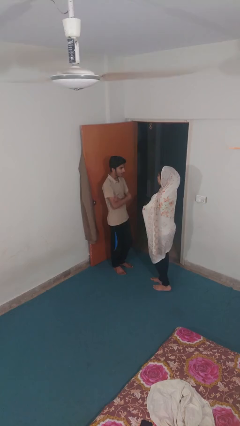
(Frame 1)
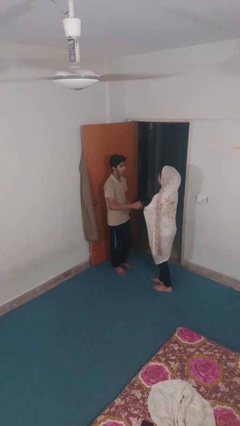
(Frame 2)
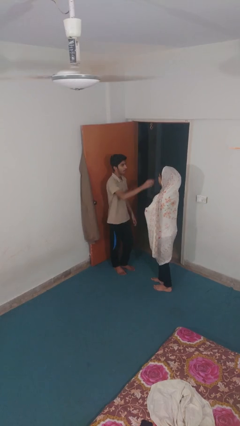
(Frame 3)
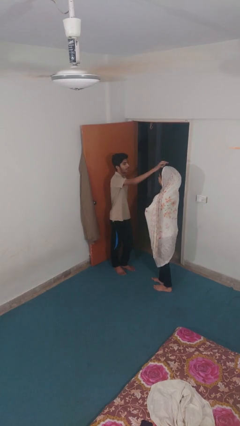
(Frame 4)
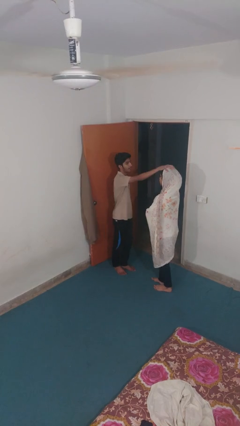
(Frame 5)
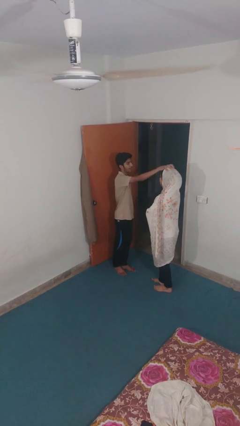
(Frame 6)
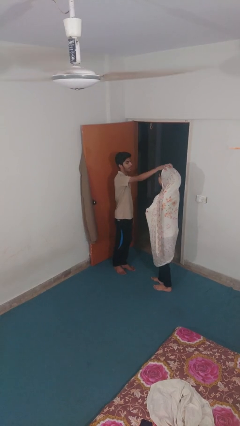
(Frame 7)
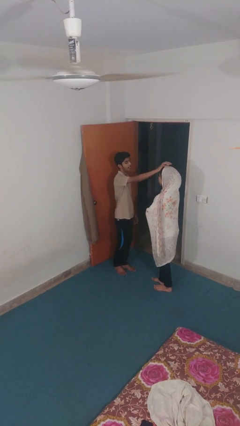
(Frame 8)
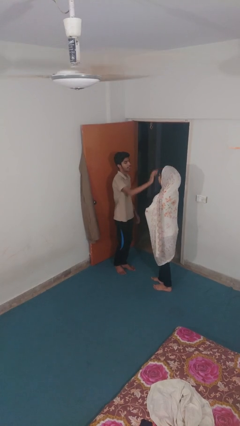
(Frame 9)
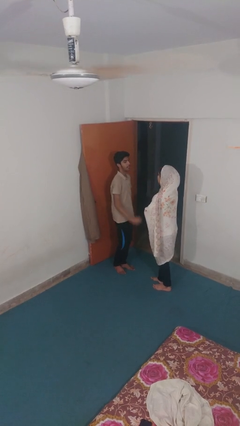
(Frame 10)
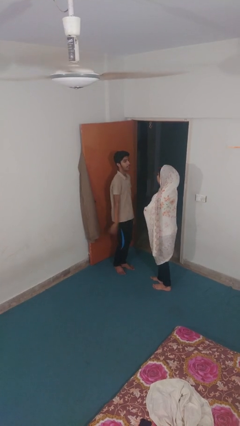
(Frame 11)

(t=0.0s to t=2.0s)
person grabs person by hair

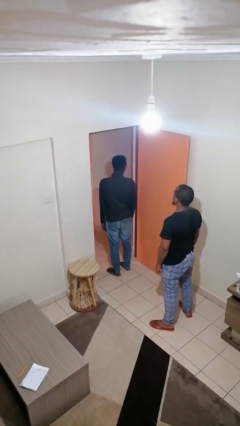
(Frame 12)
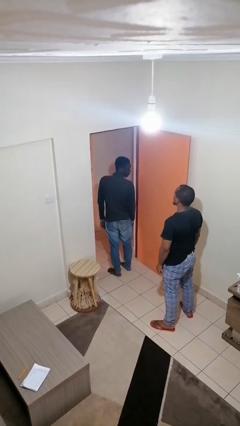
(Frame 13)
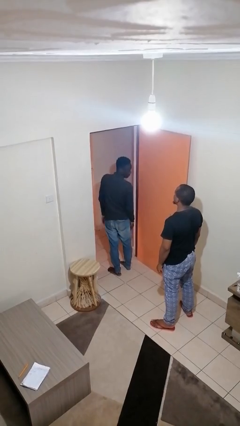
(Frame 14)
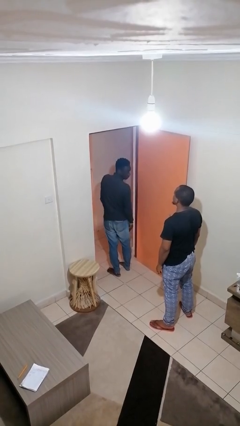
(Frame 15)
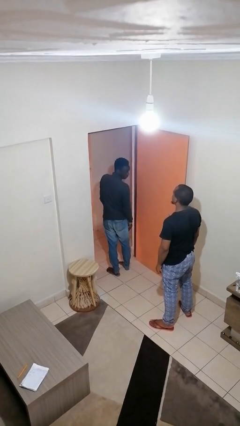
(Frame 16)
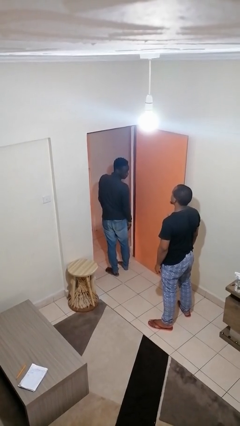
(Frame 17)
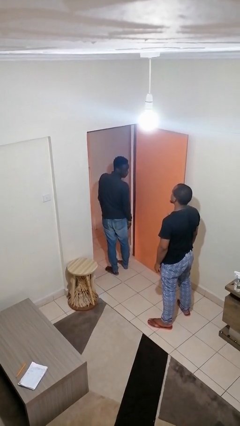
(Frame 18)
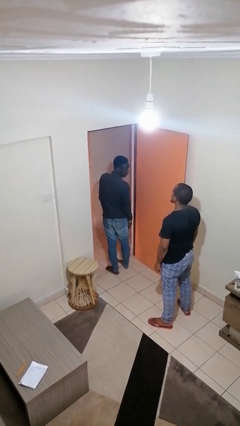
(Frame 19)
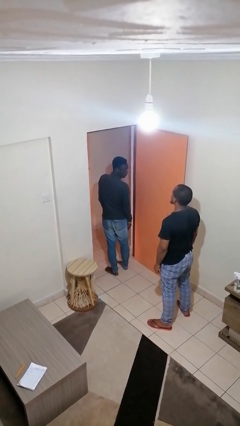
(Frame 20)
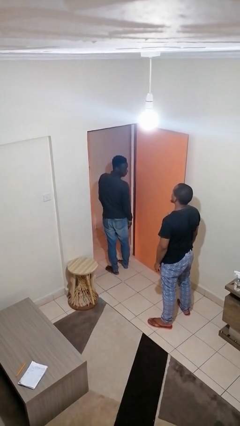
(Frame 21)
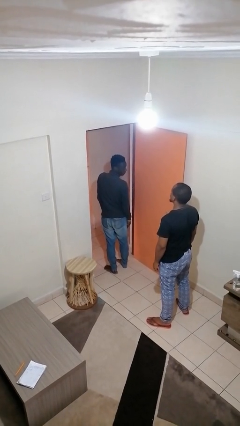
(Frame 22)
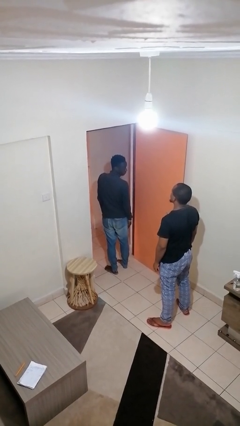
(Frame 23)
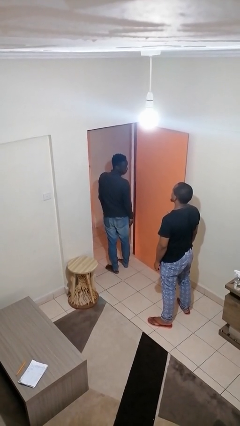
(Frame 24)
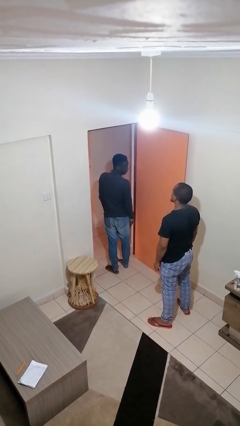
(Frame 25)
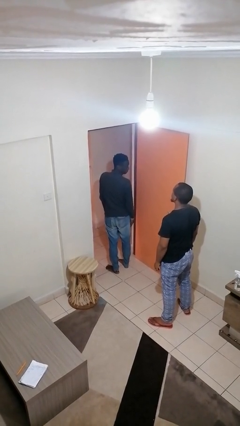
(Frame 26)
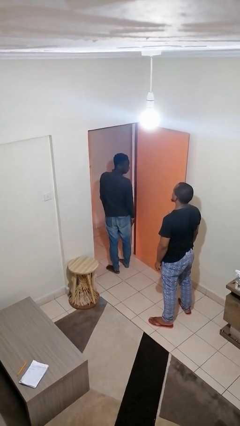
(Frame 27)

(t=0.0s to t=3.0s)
person looks over shoulder

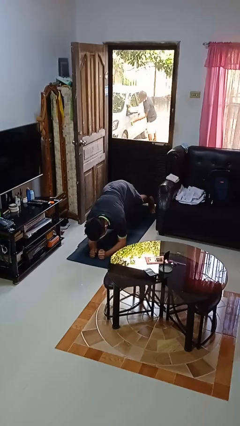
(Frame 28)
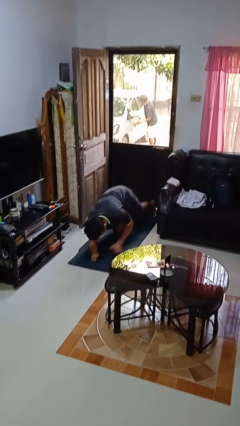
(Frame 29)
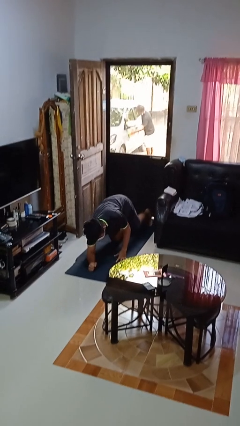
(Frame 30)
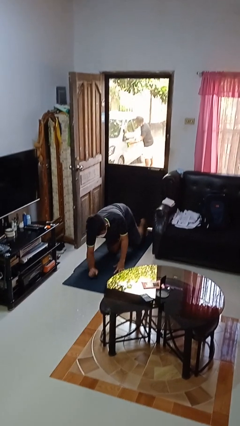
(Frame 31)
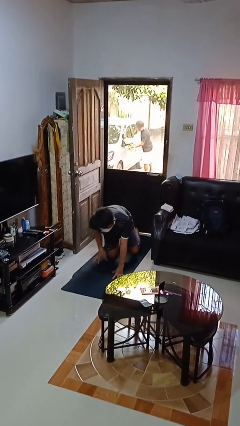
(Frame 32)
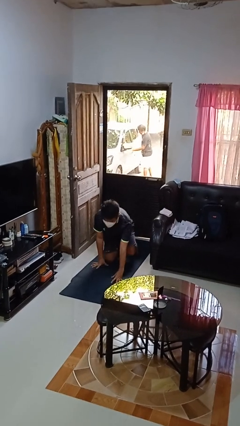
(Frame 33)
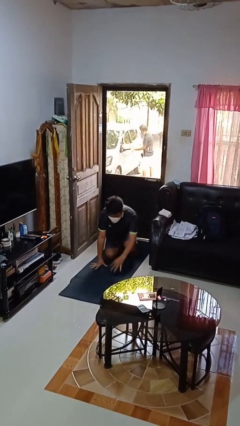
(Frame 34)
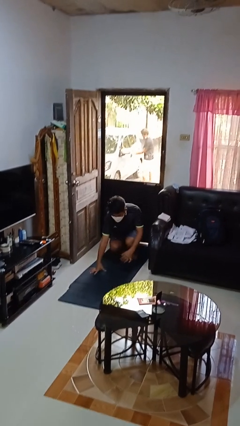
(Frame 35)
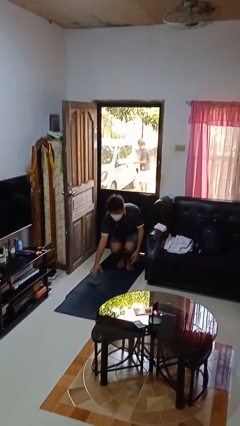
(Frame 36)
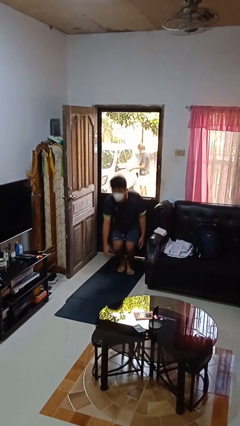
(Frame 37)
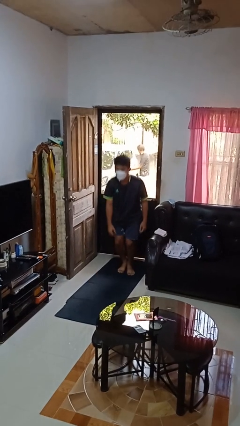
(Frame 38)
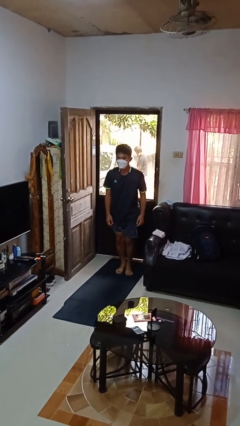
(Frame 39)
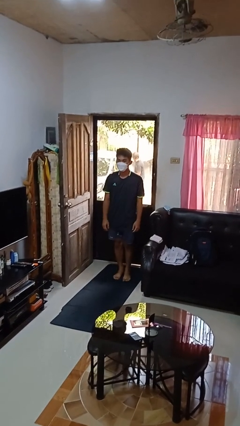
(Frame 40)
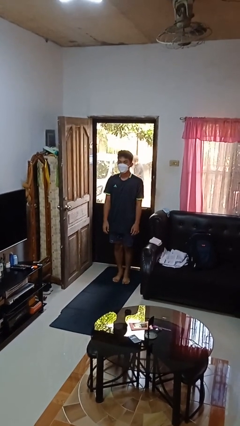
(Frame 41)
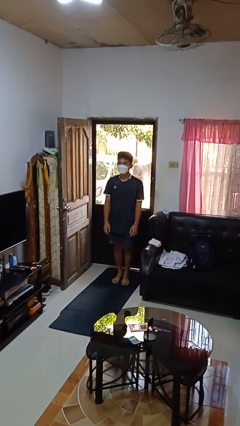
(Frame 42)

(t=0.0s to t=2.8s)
person stands up from floor

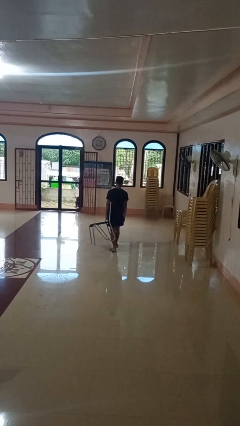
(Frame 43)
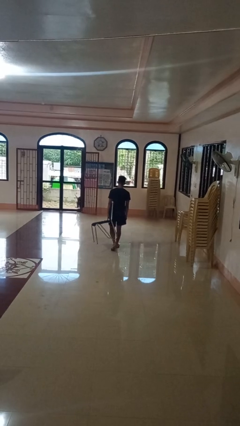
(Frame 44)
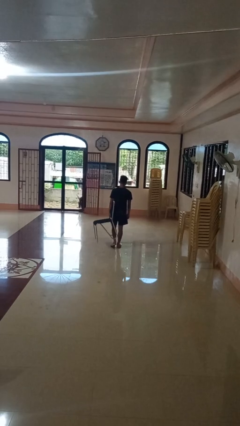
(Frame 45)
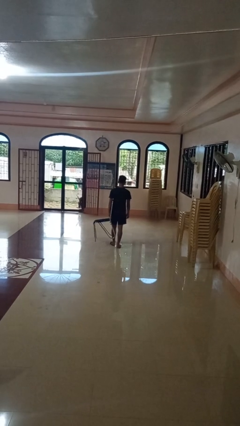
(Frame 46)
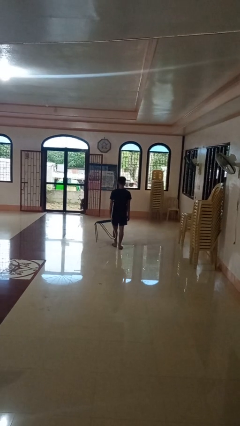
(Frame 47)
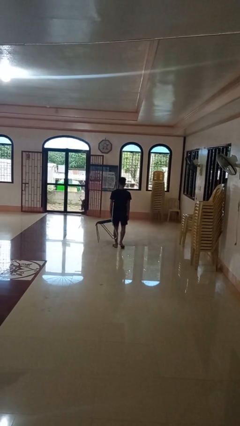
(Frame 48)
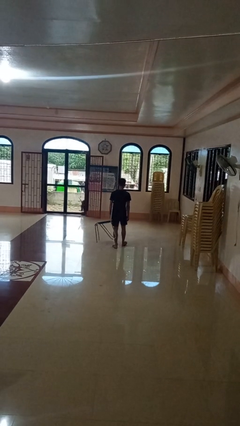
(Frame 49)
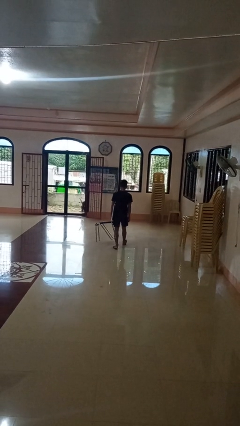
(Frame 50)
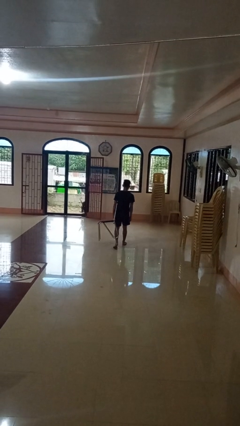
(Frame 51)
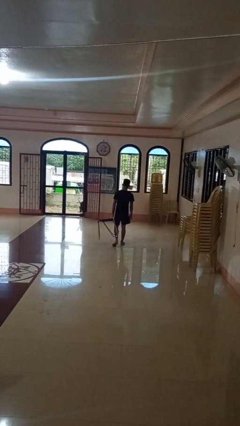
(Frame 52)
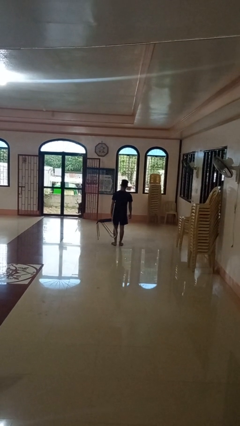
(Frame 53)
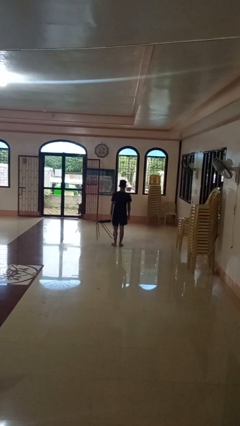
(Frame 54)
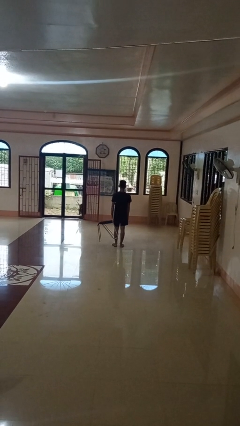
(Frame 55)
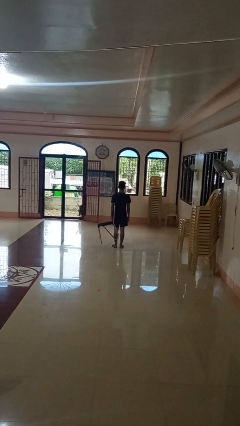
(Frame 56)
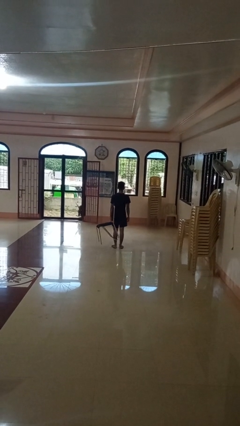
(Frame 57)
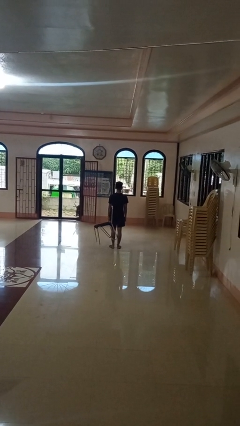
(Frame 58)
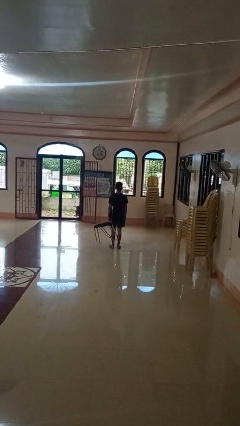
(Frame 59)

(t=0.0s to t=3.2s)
person carries furniture

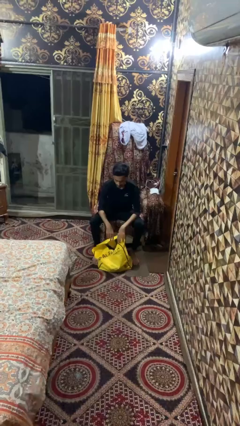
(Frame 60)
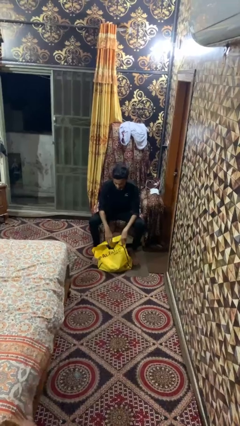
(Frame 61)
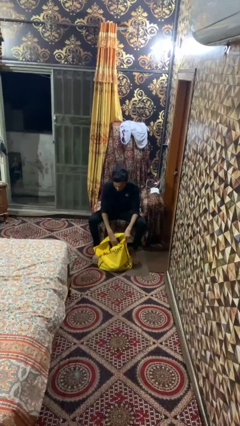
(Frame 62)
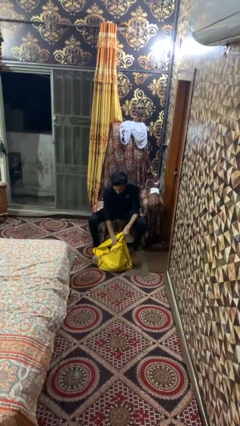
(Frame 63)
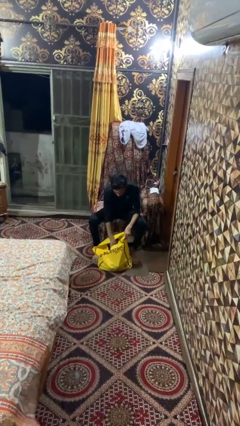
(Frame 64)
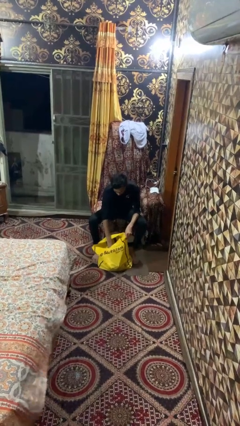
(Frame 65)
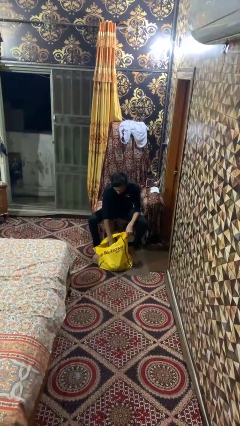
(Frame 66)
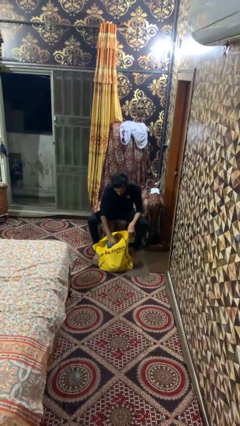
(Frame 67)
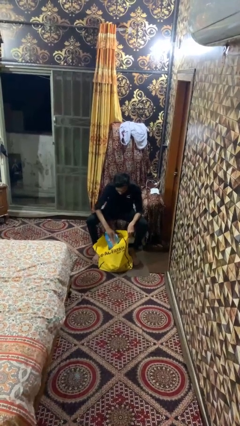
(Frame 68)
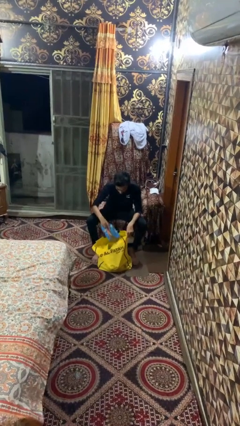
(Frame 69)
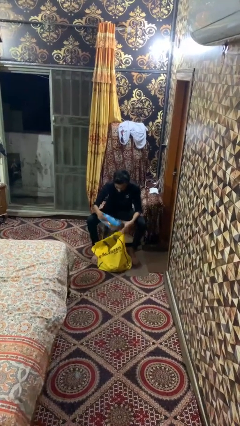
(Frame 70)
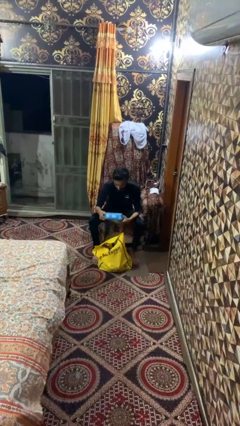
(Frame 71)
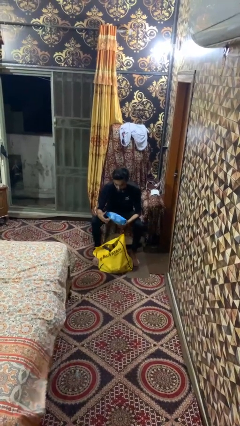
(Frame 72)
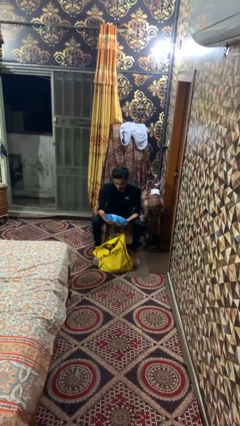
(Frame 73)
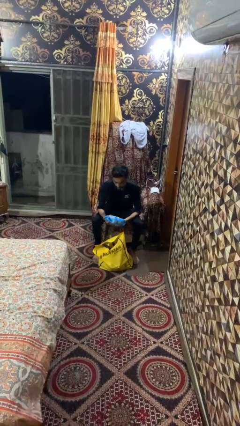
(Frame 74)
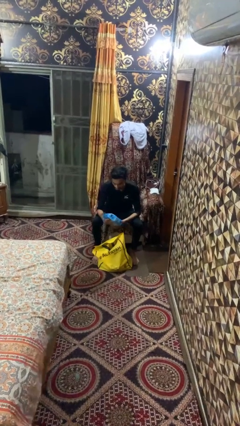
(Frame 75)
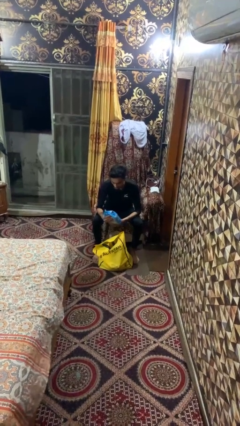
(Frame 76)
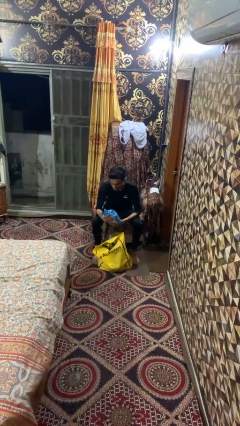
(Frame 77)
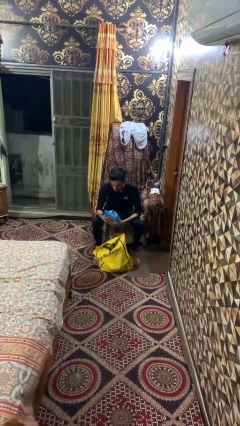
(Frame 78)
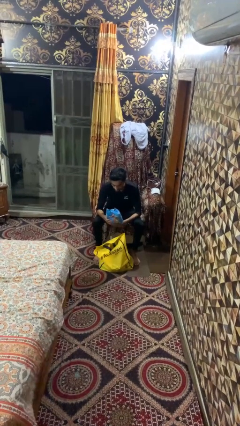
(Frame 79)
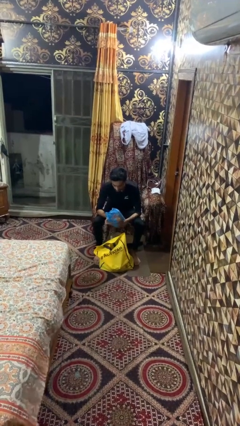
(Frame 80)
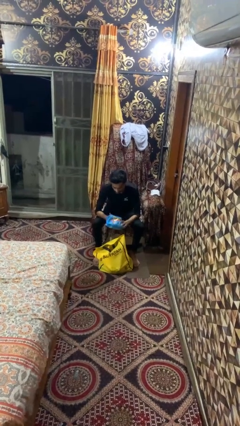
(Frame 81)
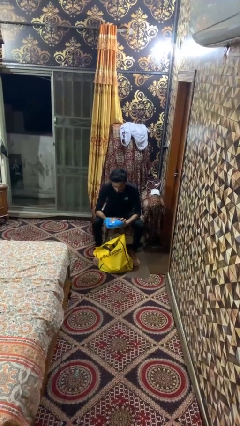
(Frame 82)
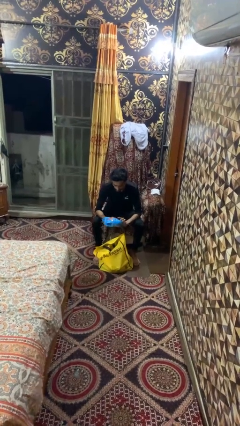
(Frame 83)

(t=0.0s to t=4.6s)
person takes object from bag

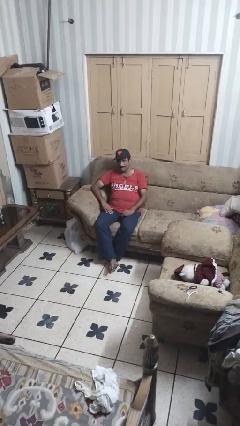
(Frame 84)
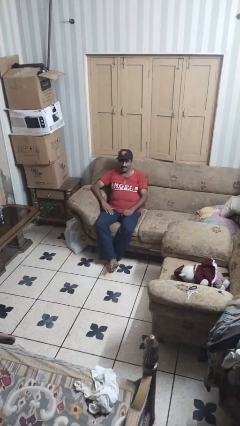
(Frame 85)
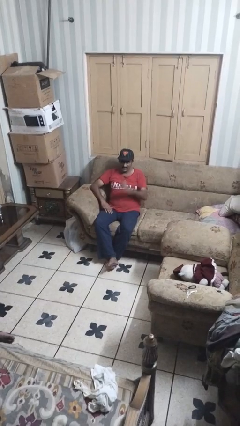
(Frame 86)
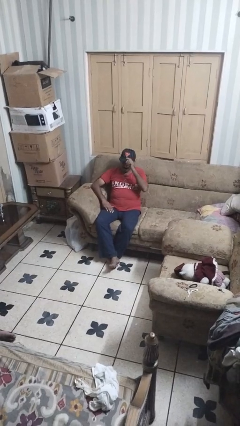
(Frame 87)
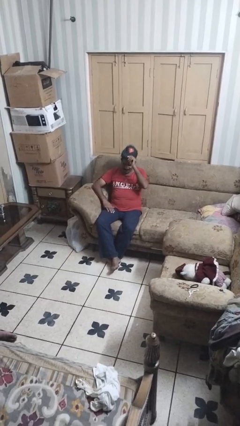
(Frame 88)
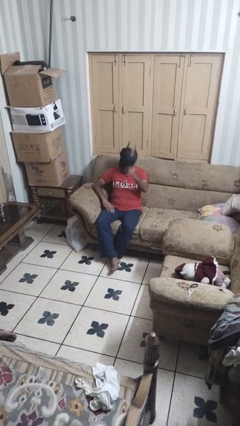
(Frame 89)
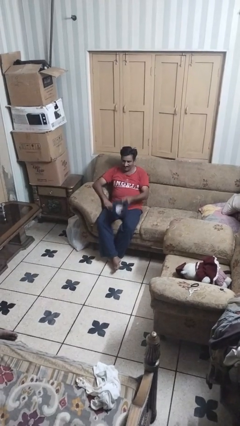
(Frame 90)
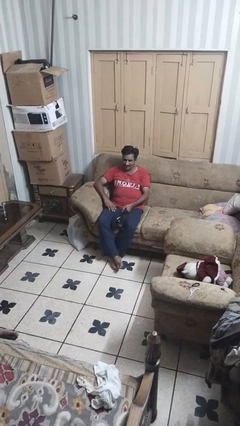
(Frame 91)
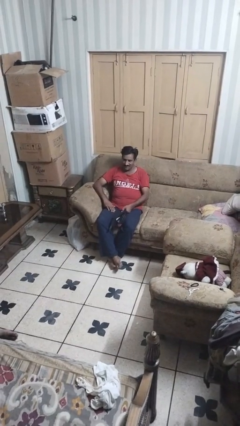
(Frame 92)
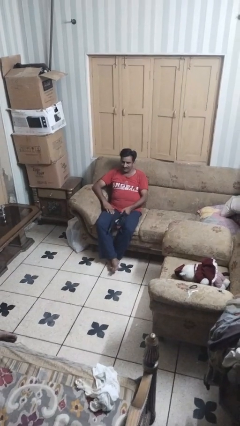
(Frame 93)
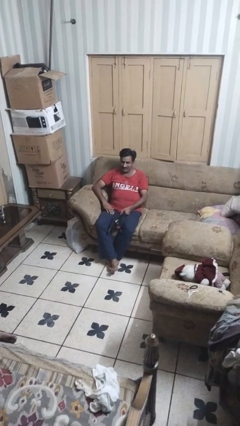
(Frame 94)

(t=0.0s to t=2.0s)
person takes off hat
